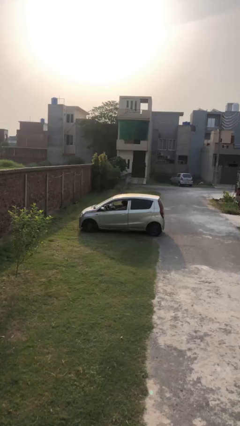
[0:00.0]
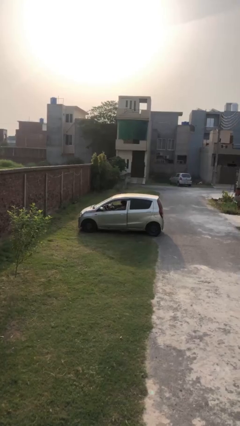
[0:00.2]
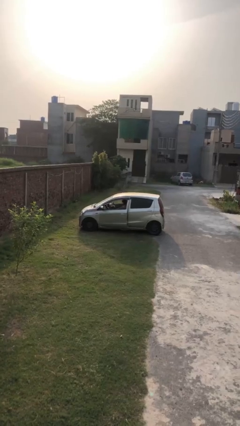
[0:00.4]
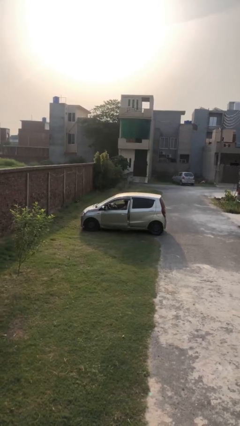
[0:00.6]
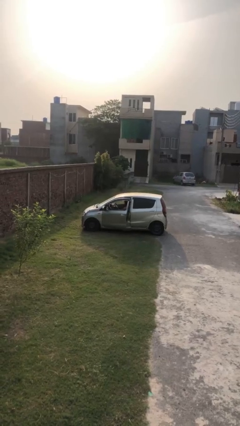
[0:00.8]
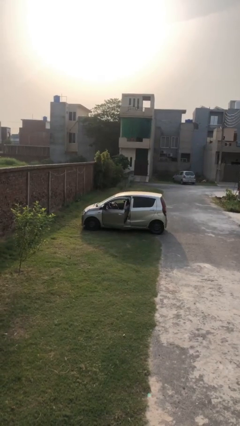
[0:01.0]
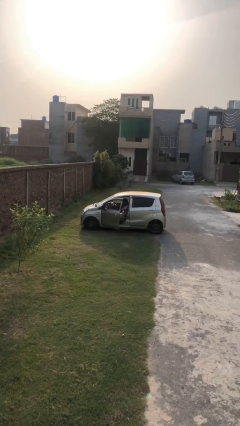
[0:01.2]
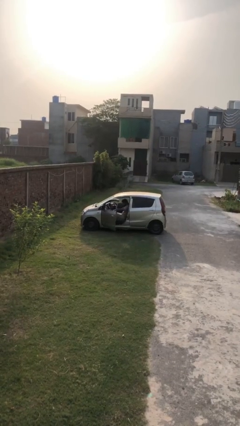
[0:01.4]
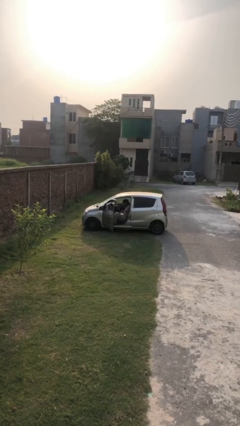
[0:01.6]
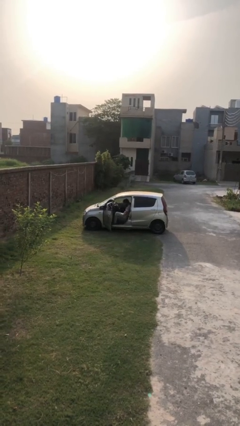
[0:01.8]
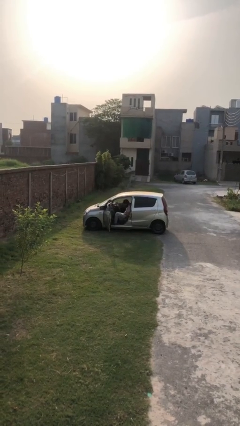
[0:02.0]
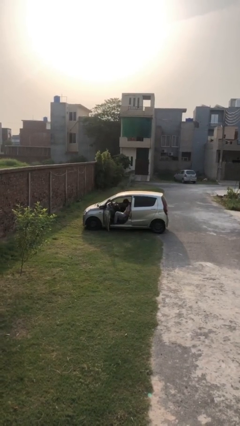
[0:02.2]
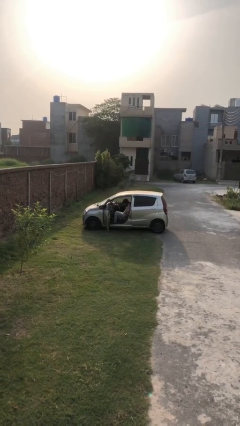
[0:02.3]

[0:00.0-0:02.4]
person opens car door

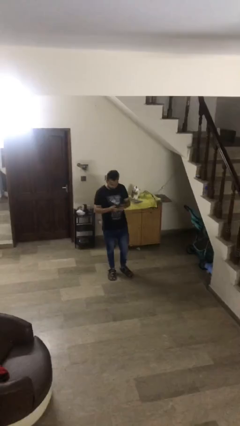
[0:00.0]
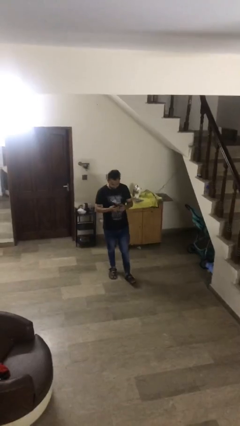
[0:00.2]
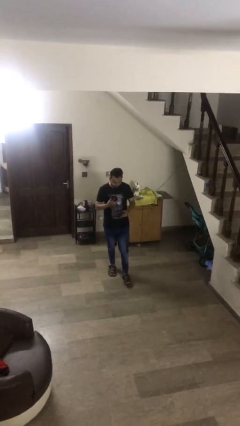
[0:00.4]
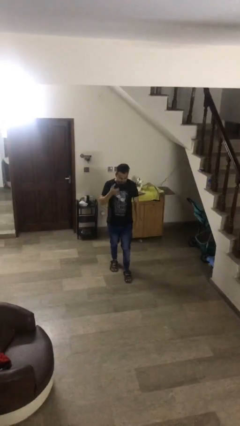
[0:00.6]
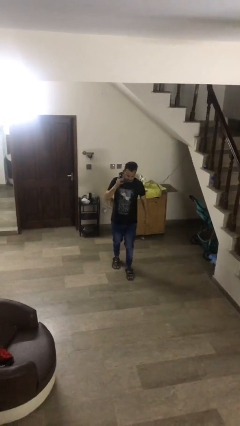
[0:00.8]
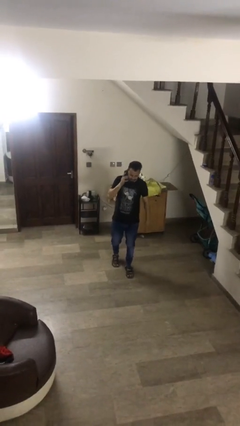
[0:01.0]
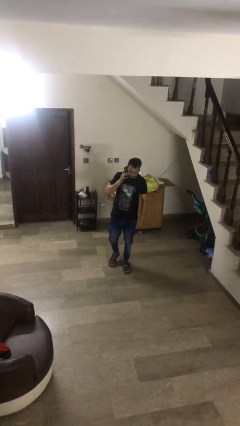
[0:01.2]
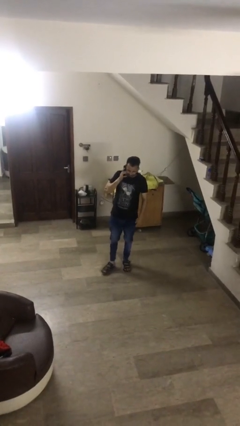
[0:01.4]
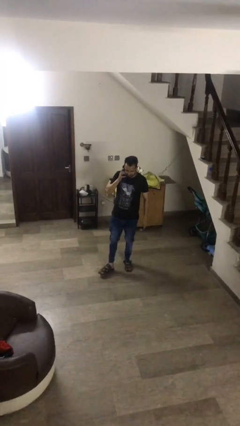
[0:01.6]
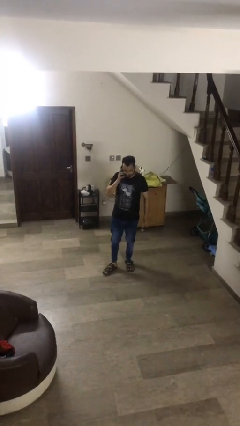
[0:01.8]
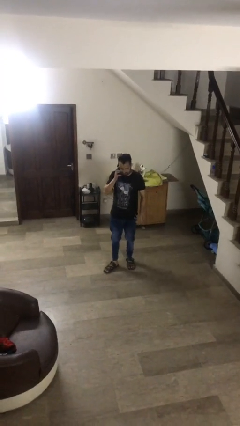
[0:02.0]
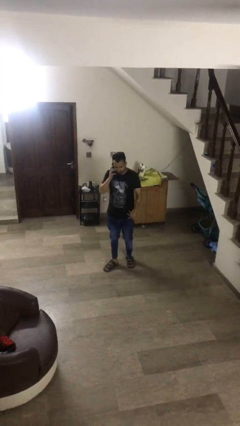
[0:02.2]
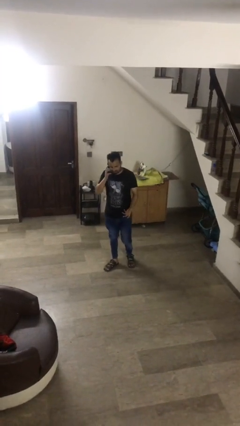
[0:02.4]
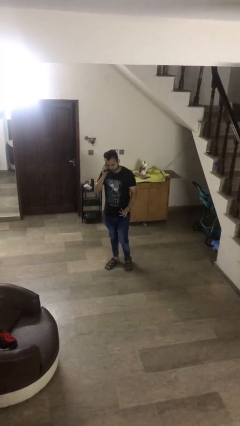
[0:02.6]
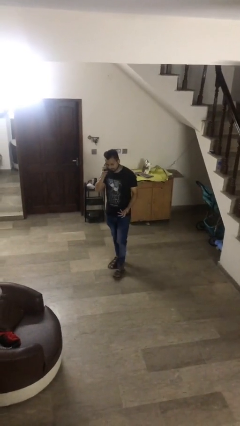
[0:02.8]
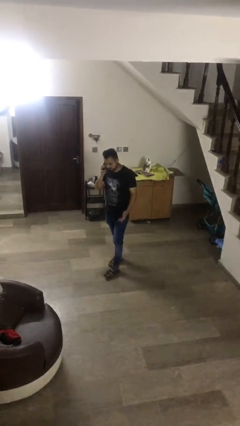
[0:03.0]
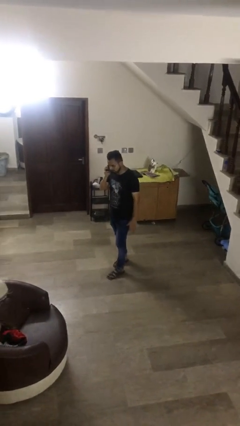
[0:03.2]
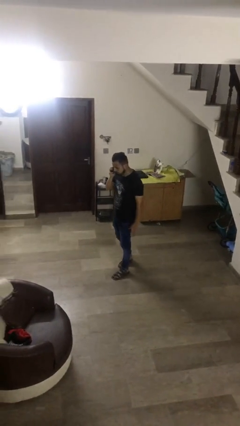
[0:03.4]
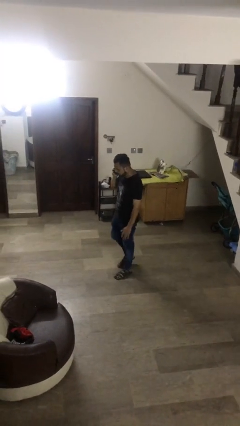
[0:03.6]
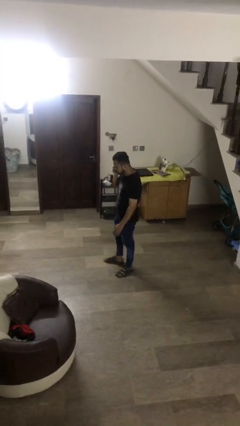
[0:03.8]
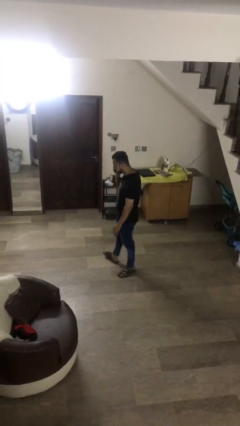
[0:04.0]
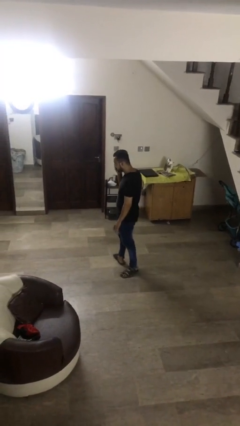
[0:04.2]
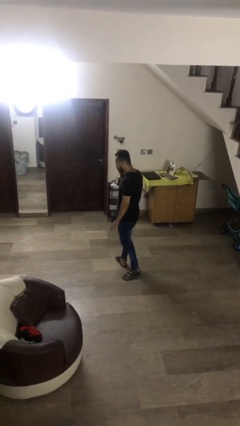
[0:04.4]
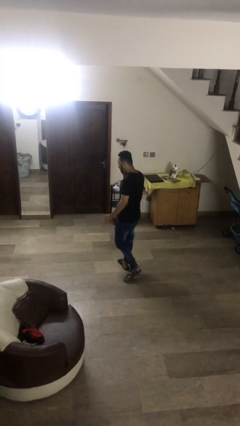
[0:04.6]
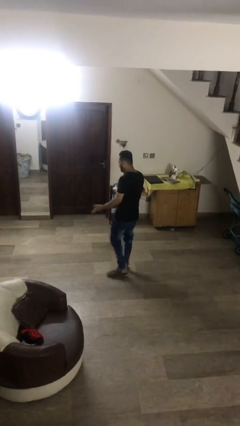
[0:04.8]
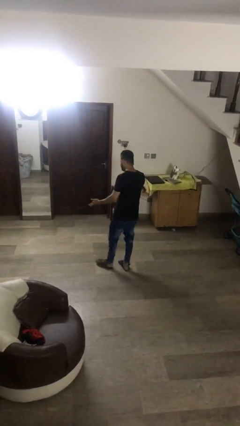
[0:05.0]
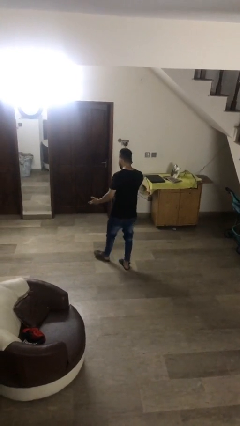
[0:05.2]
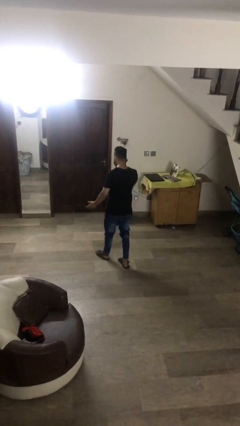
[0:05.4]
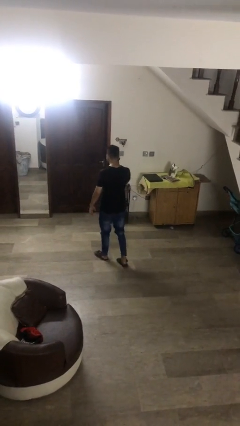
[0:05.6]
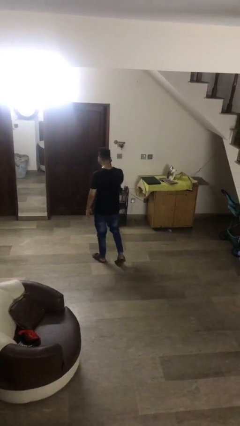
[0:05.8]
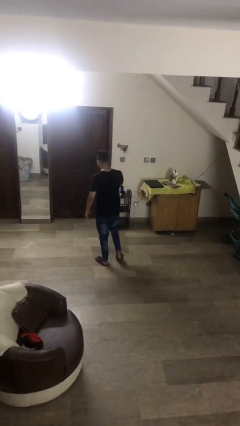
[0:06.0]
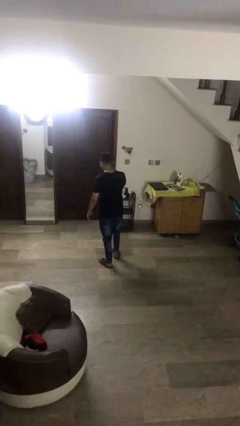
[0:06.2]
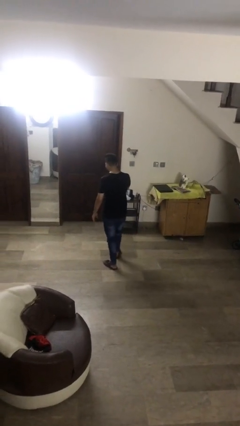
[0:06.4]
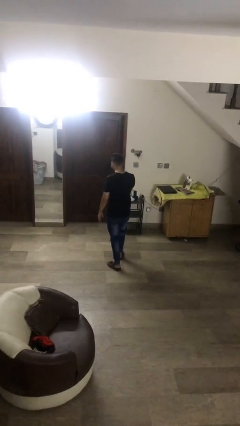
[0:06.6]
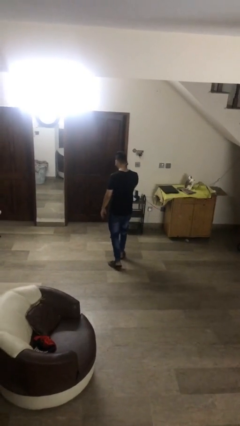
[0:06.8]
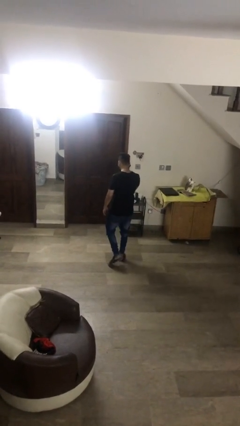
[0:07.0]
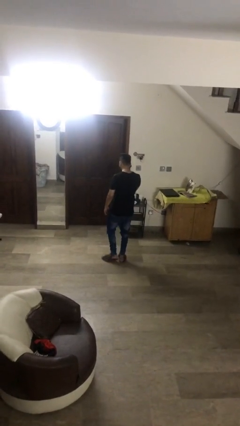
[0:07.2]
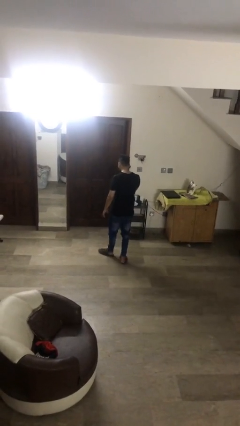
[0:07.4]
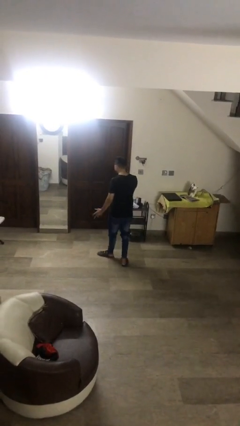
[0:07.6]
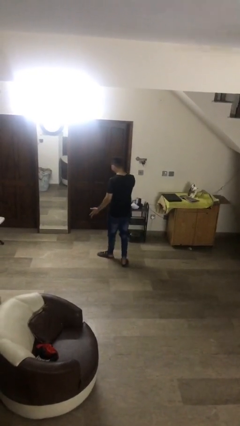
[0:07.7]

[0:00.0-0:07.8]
person talks on phone

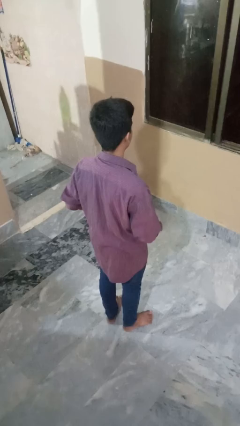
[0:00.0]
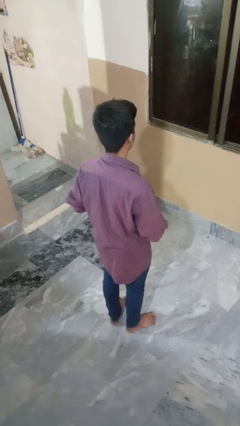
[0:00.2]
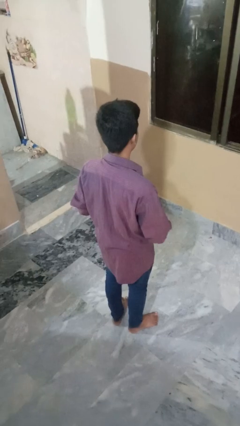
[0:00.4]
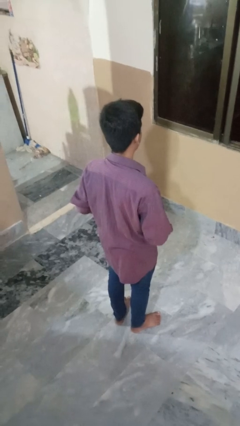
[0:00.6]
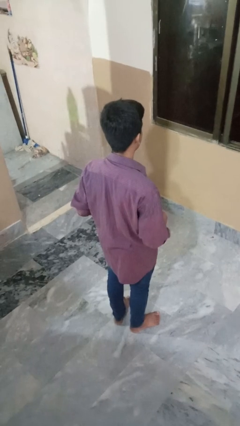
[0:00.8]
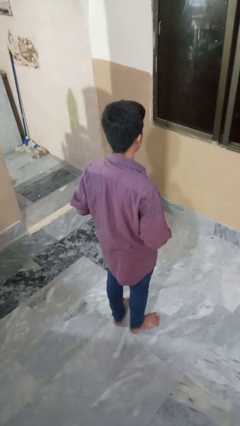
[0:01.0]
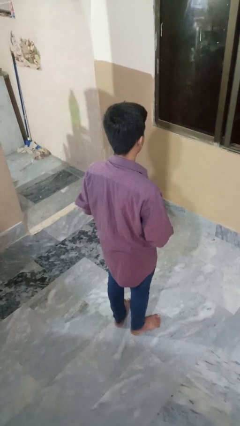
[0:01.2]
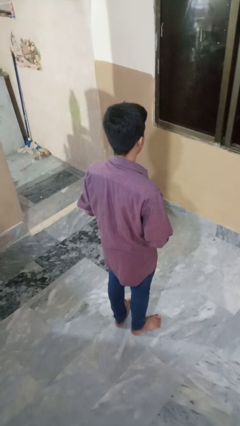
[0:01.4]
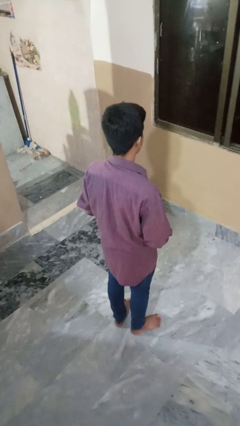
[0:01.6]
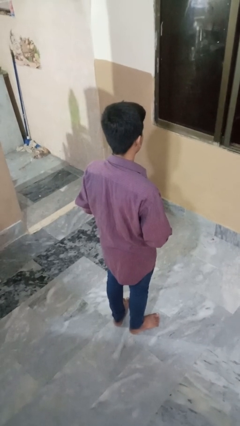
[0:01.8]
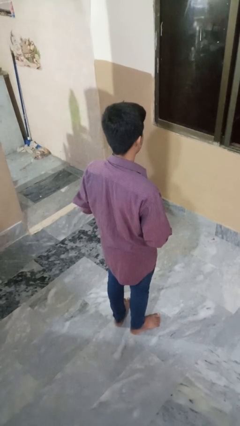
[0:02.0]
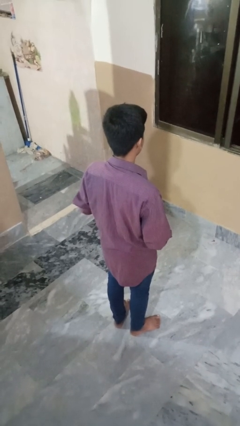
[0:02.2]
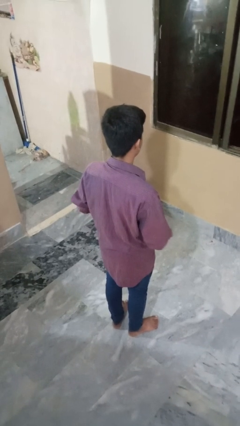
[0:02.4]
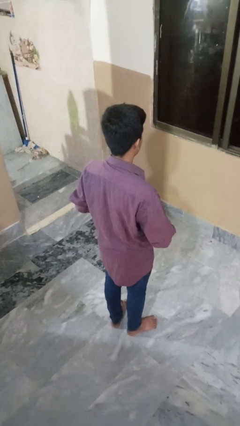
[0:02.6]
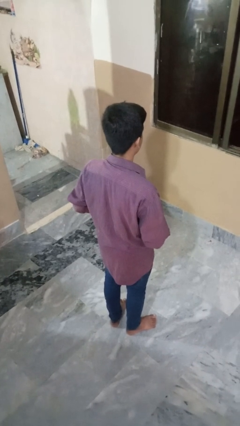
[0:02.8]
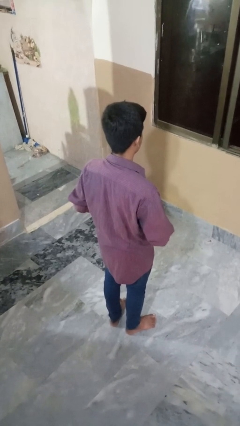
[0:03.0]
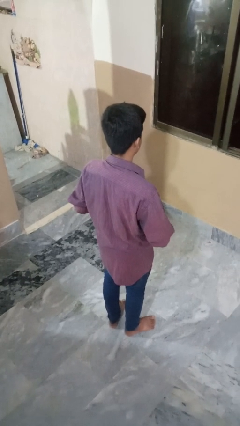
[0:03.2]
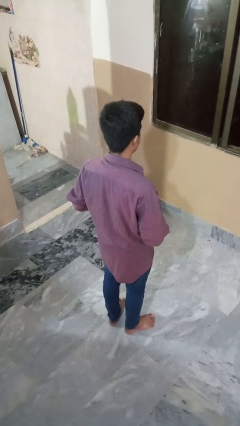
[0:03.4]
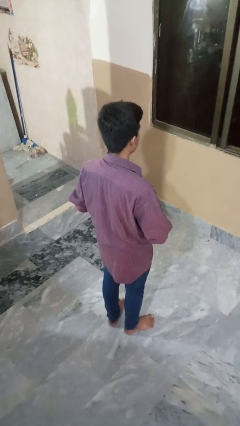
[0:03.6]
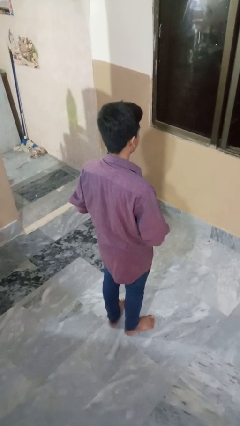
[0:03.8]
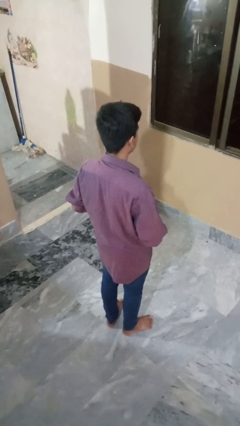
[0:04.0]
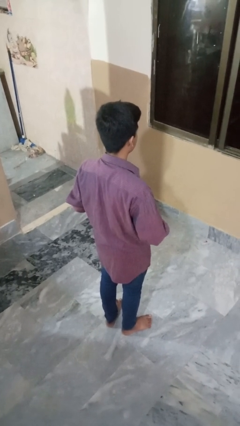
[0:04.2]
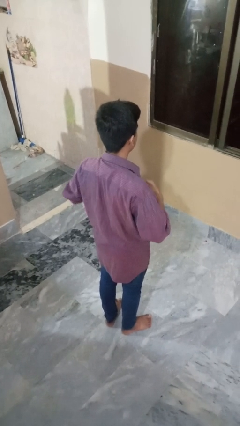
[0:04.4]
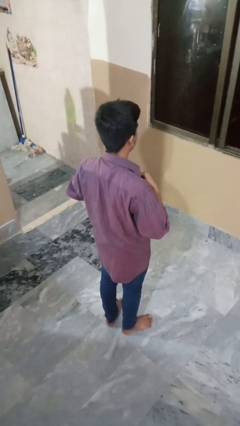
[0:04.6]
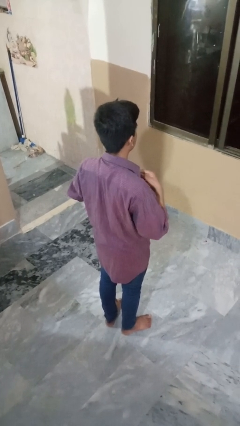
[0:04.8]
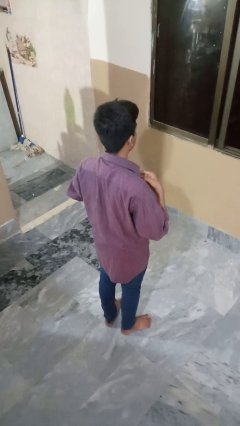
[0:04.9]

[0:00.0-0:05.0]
person buttons shirt

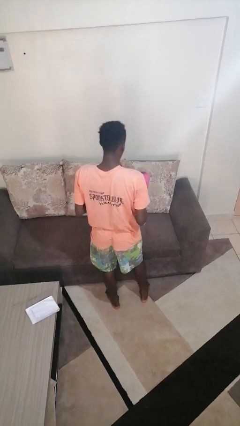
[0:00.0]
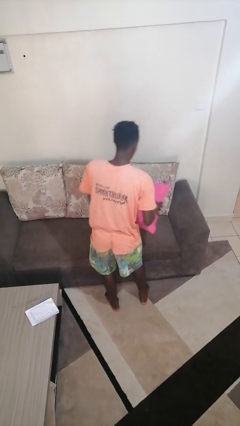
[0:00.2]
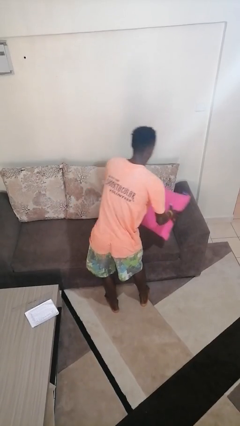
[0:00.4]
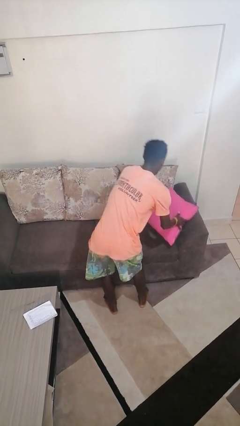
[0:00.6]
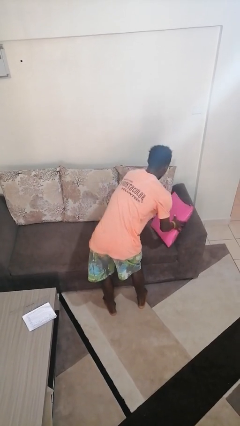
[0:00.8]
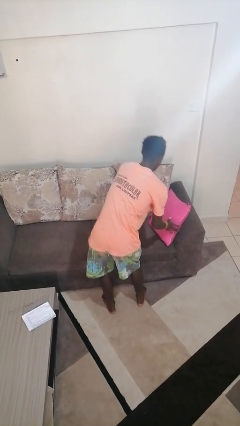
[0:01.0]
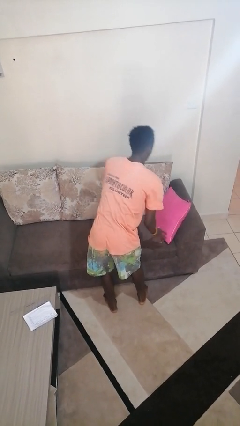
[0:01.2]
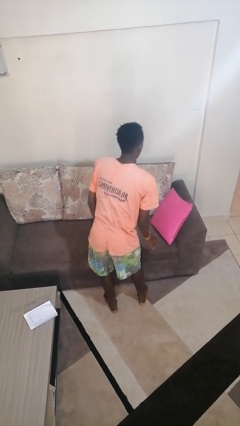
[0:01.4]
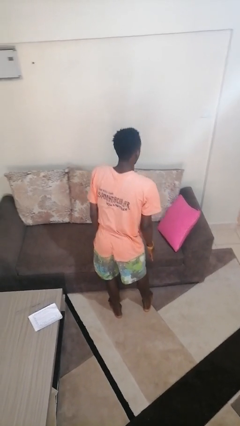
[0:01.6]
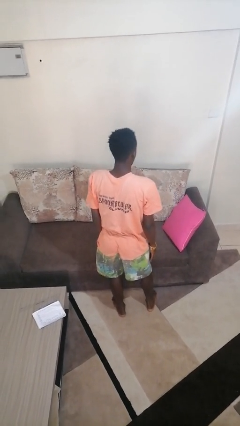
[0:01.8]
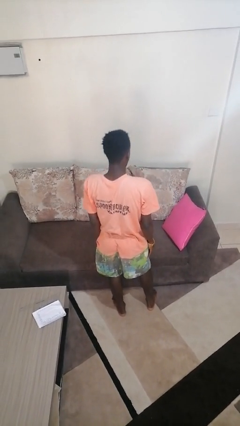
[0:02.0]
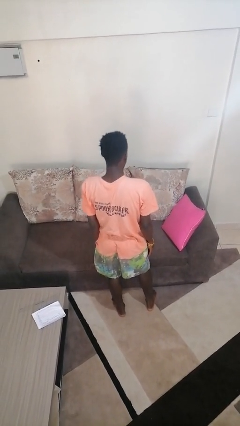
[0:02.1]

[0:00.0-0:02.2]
person puts down object on couch

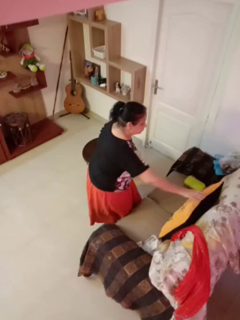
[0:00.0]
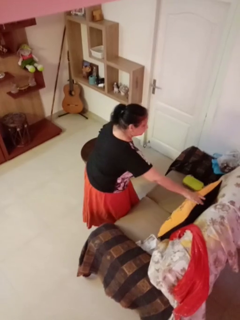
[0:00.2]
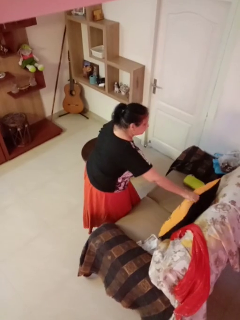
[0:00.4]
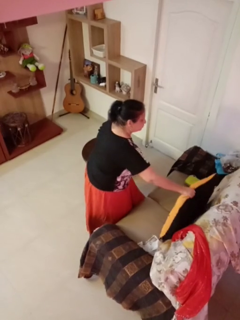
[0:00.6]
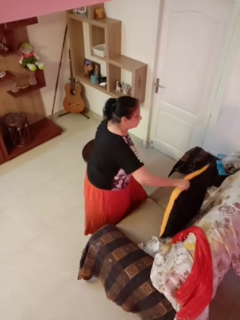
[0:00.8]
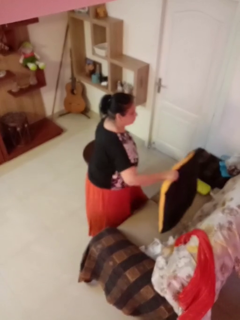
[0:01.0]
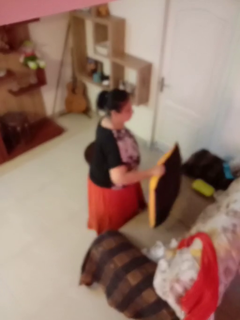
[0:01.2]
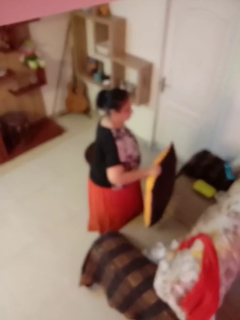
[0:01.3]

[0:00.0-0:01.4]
person picks up object from couch
